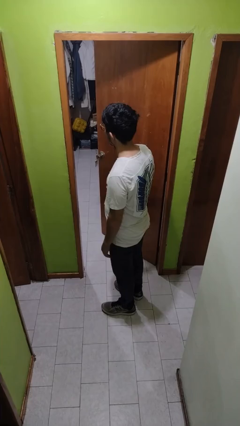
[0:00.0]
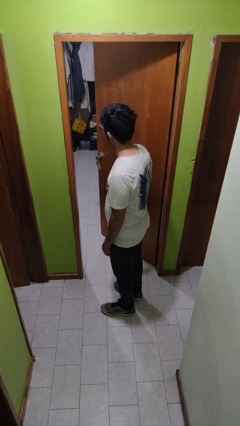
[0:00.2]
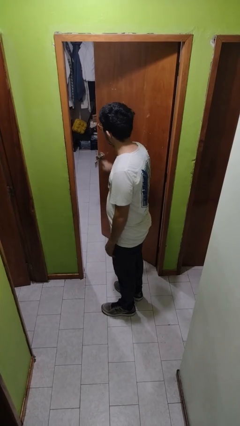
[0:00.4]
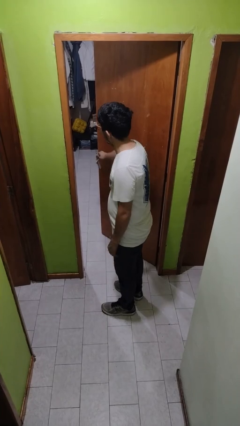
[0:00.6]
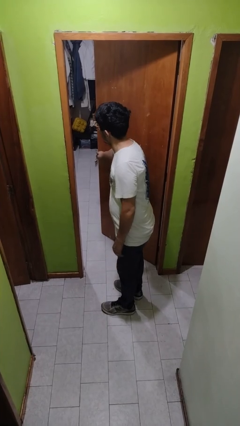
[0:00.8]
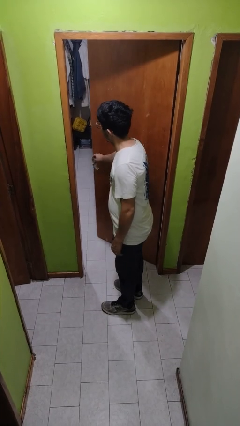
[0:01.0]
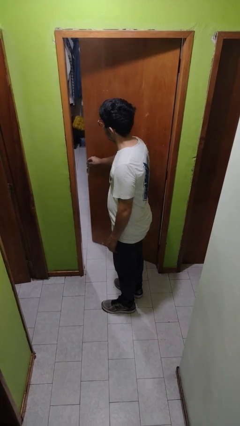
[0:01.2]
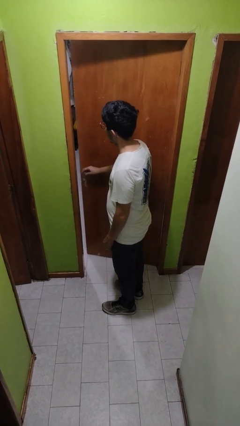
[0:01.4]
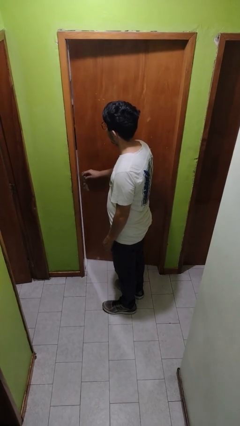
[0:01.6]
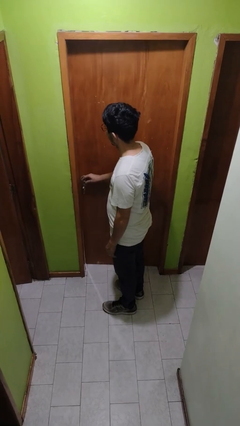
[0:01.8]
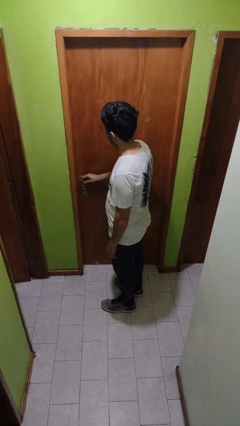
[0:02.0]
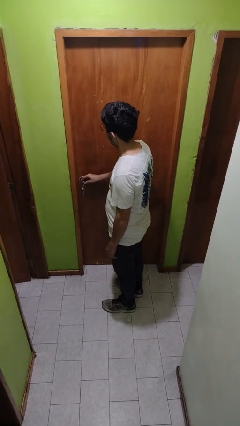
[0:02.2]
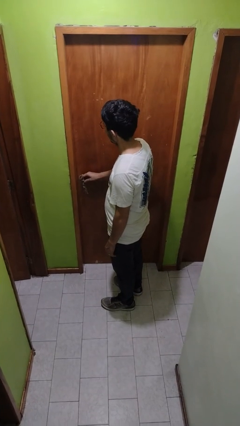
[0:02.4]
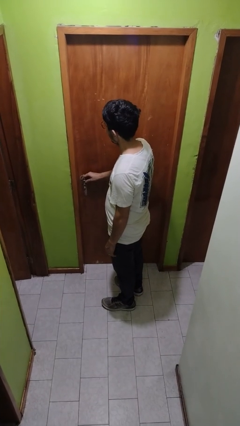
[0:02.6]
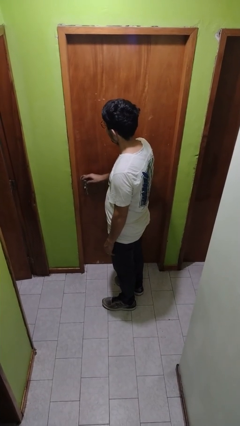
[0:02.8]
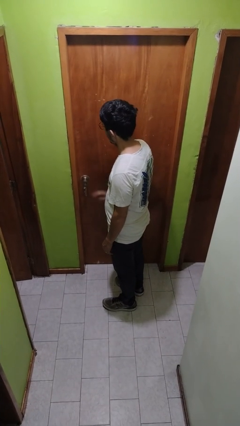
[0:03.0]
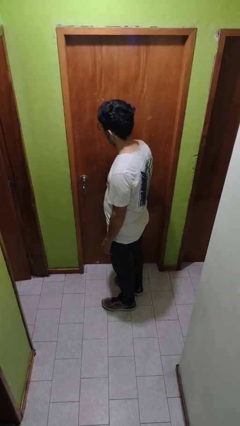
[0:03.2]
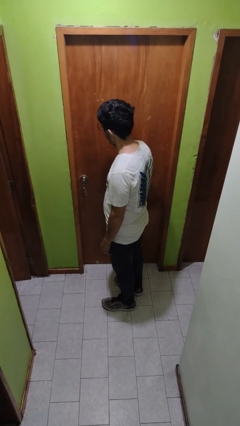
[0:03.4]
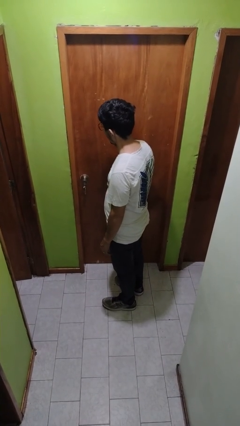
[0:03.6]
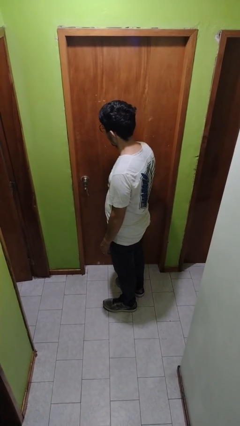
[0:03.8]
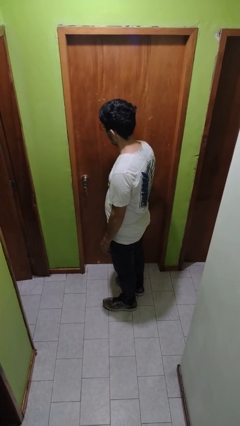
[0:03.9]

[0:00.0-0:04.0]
person closes facility door

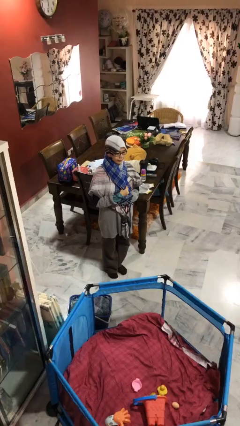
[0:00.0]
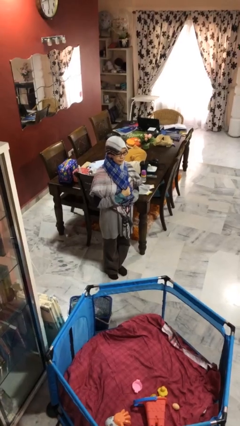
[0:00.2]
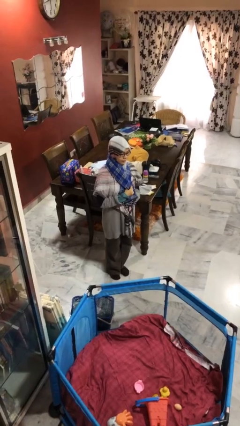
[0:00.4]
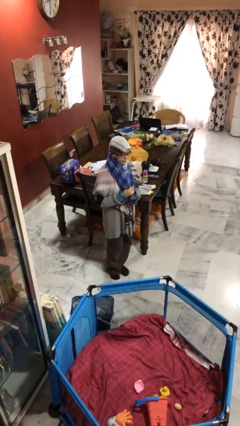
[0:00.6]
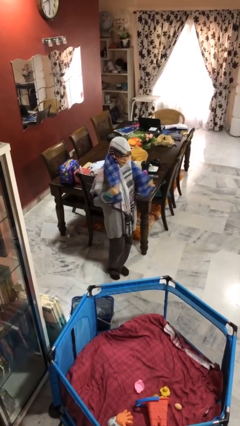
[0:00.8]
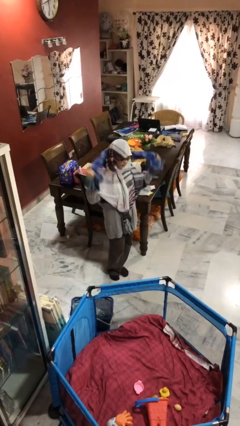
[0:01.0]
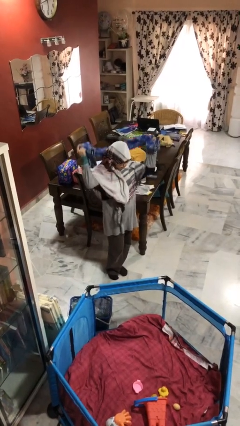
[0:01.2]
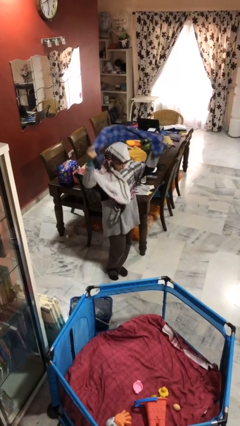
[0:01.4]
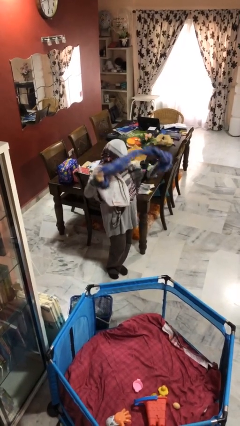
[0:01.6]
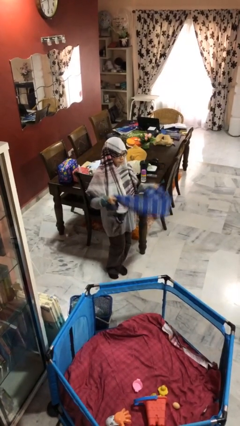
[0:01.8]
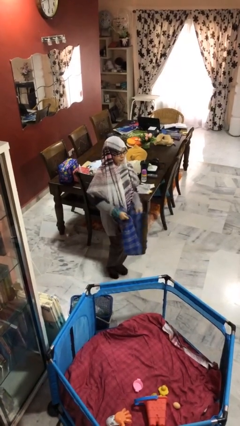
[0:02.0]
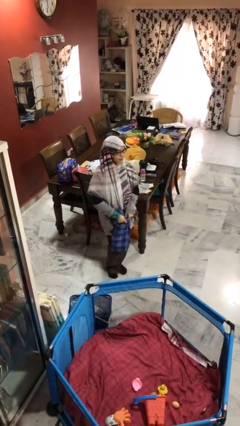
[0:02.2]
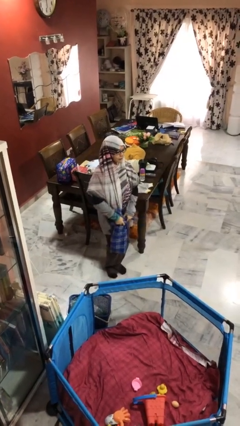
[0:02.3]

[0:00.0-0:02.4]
person takes off scarf

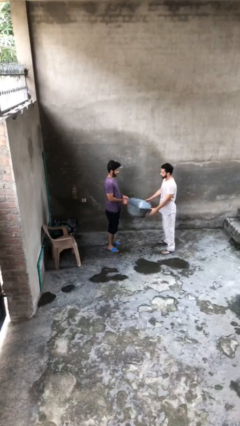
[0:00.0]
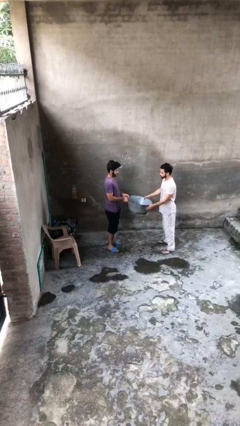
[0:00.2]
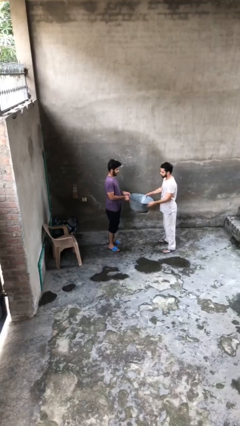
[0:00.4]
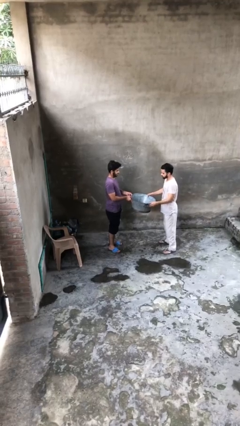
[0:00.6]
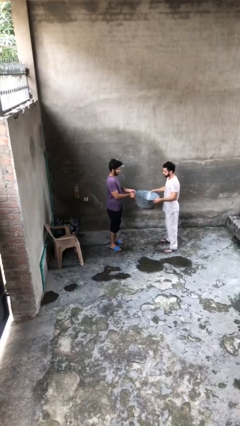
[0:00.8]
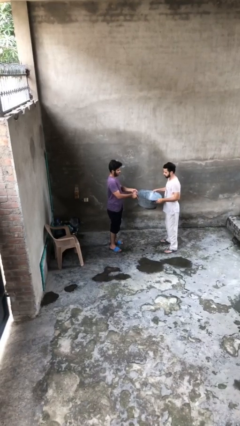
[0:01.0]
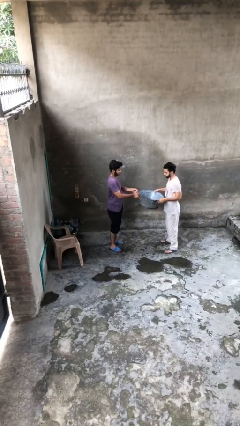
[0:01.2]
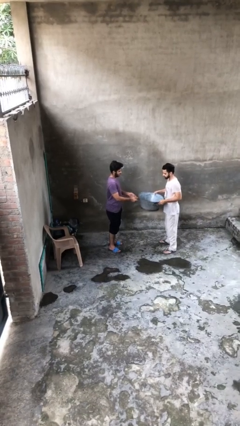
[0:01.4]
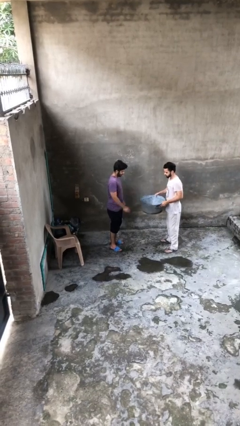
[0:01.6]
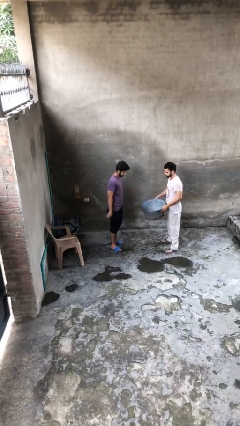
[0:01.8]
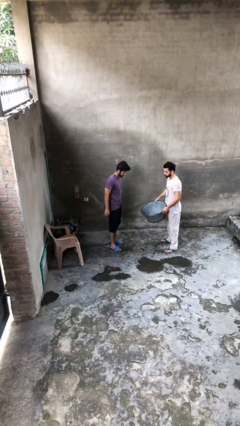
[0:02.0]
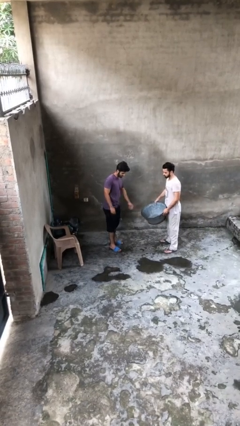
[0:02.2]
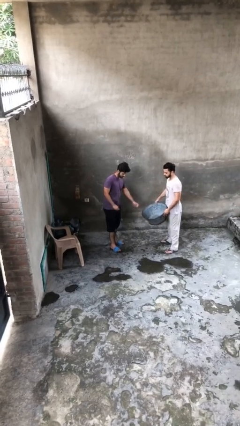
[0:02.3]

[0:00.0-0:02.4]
person transfers object to person

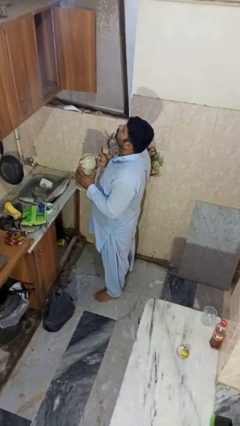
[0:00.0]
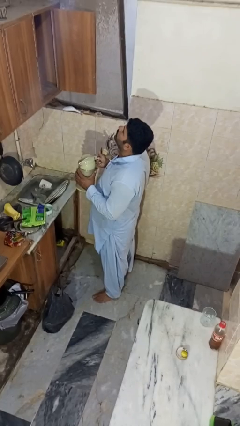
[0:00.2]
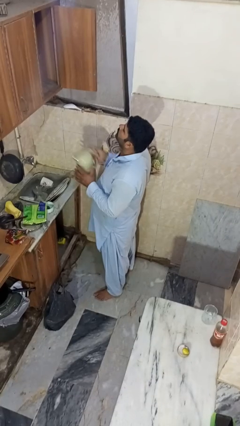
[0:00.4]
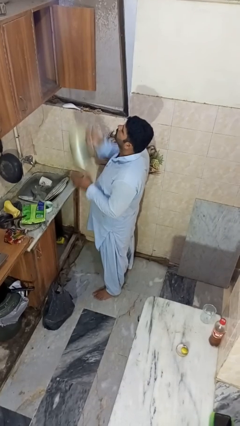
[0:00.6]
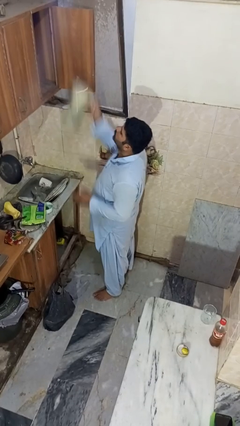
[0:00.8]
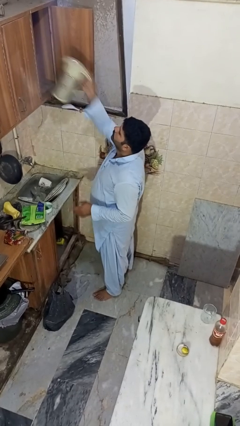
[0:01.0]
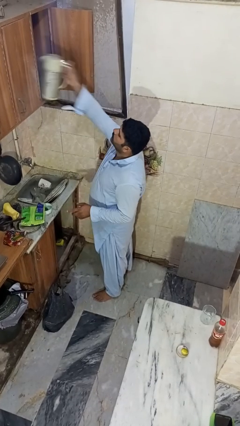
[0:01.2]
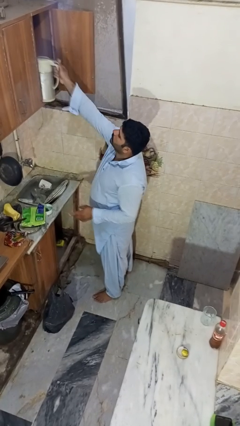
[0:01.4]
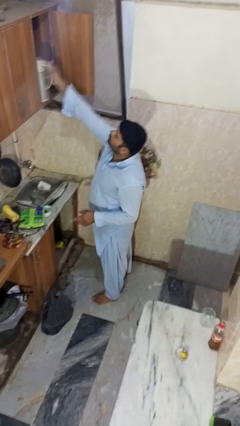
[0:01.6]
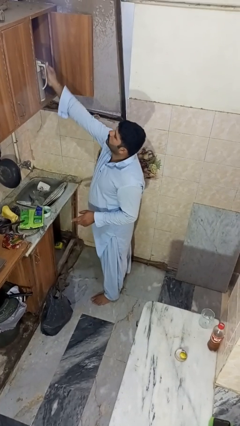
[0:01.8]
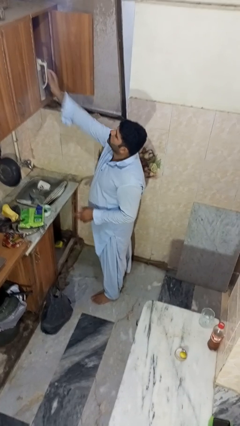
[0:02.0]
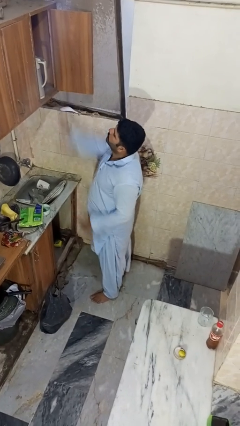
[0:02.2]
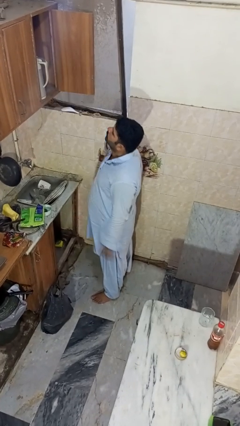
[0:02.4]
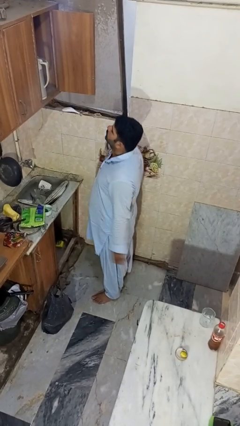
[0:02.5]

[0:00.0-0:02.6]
person puts object in cabinet

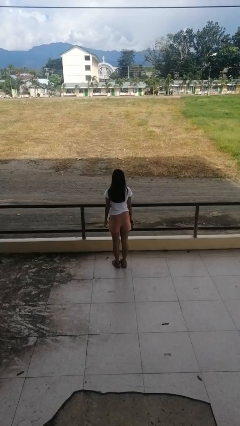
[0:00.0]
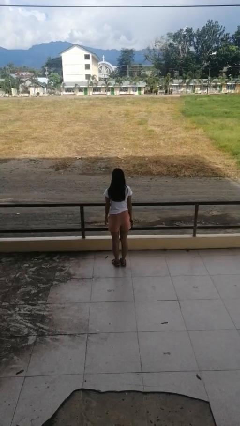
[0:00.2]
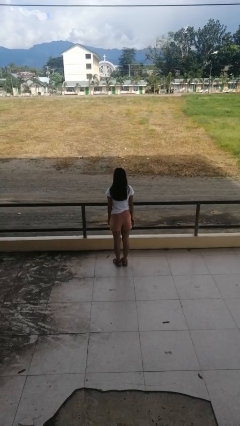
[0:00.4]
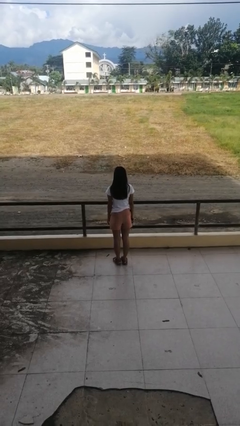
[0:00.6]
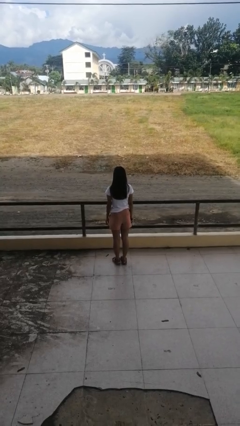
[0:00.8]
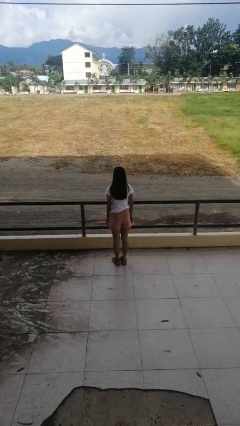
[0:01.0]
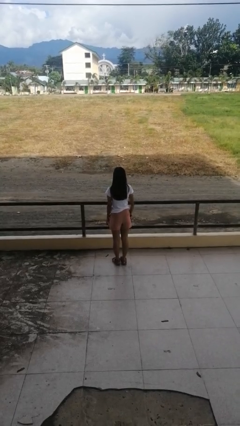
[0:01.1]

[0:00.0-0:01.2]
person takes selfie

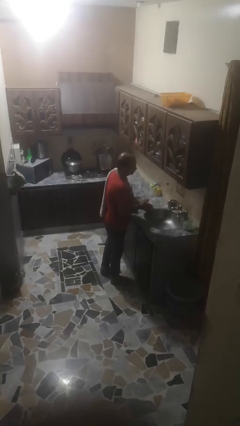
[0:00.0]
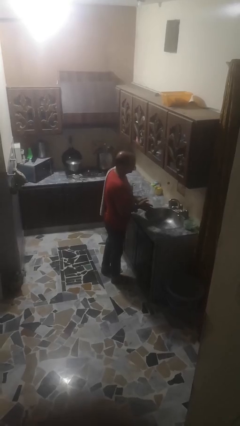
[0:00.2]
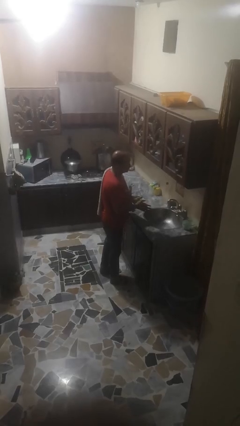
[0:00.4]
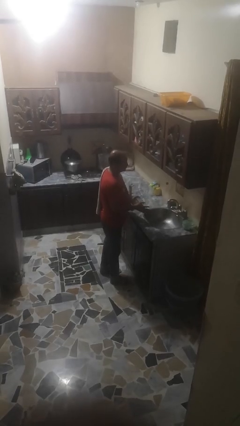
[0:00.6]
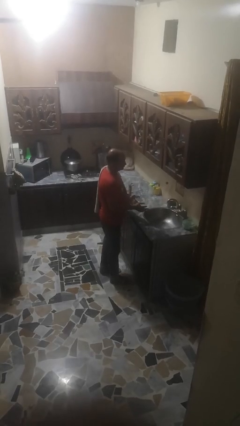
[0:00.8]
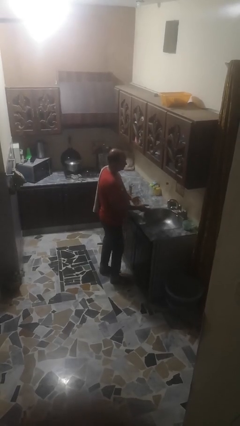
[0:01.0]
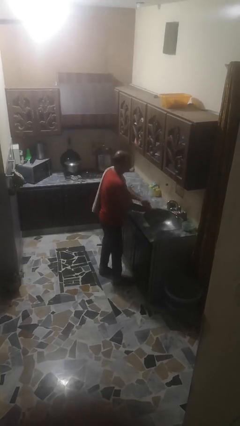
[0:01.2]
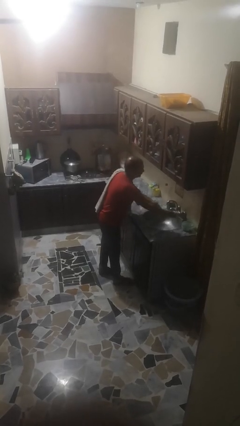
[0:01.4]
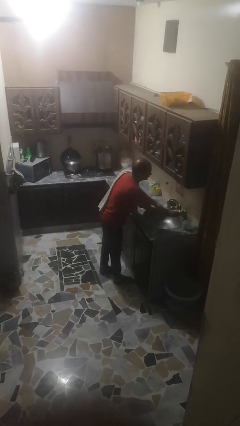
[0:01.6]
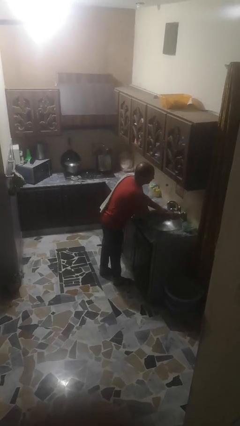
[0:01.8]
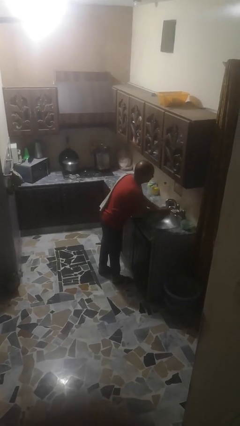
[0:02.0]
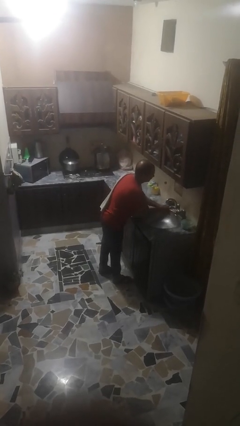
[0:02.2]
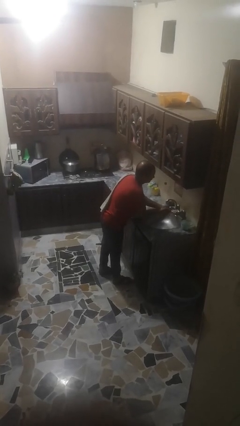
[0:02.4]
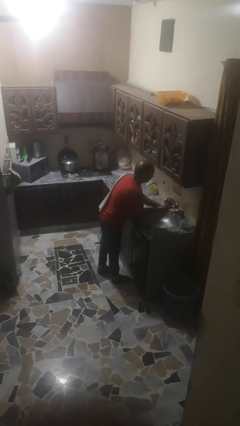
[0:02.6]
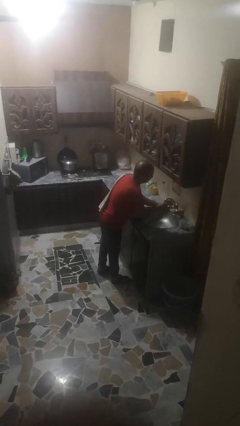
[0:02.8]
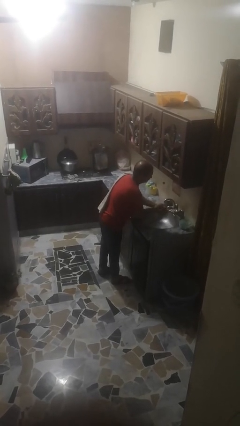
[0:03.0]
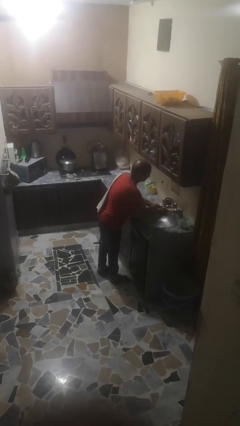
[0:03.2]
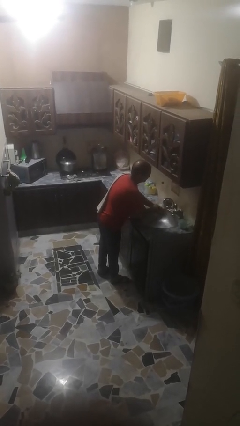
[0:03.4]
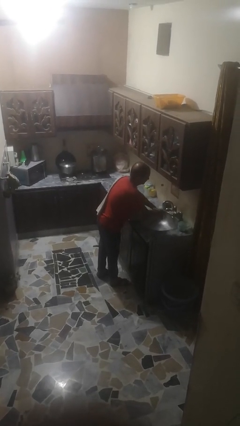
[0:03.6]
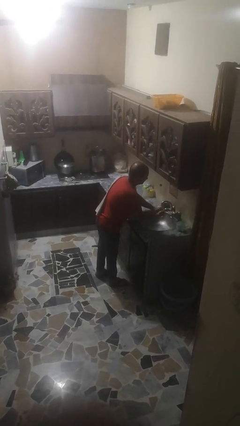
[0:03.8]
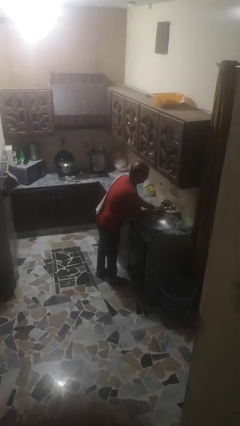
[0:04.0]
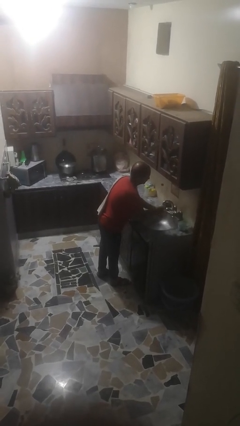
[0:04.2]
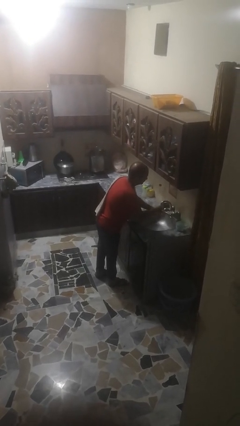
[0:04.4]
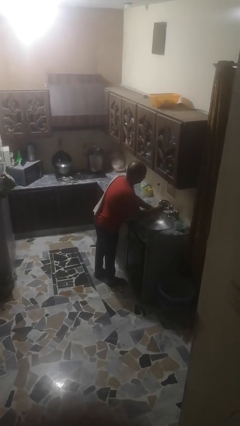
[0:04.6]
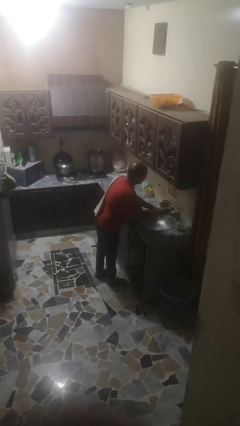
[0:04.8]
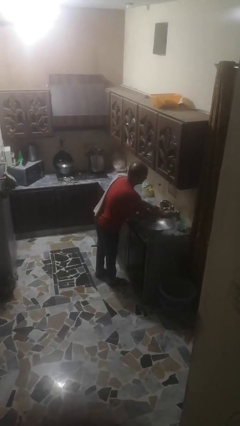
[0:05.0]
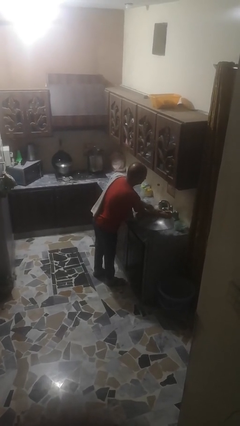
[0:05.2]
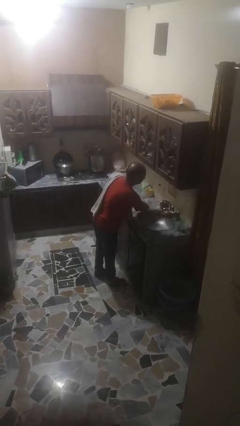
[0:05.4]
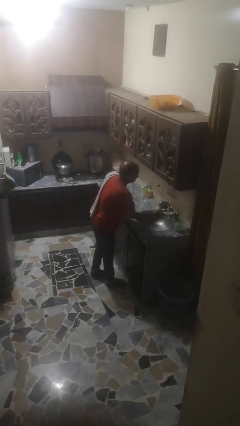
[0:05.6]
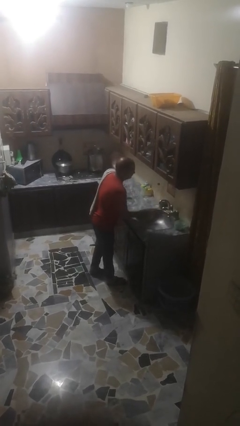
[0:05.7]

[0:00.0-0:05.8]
person washes hands
